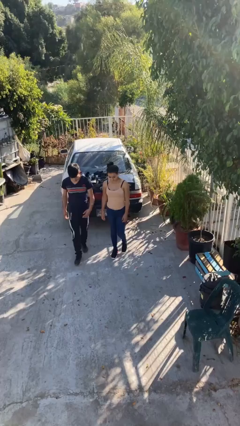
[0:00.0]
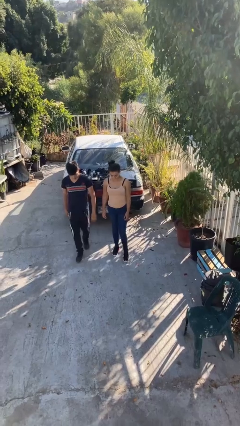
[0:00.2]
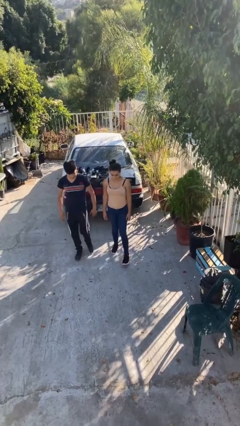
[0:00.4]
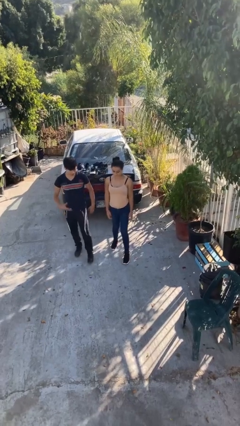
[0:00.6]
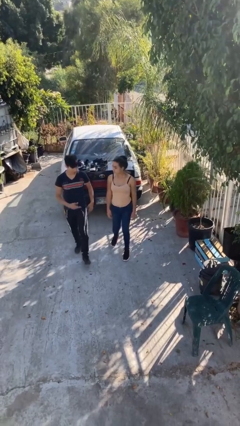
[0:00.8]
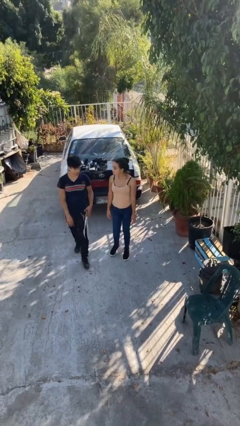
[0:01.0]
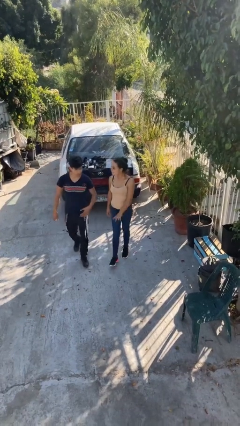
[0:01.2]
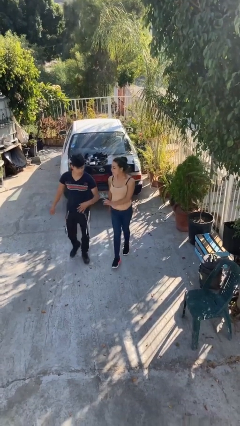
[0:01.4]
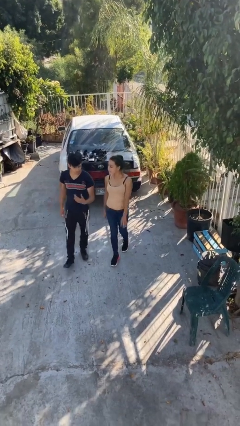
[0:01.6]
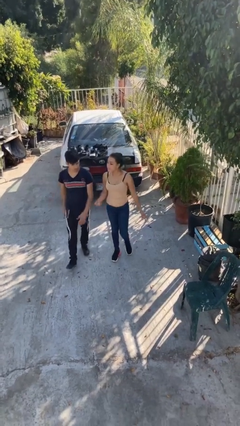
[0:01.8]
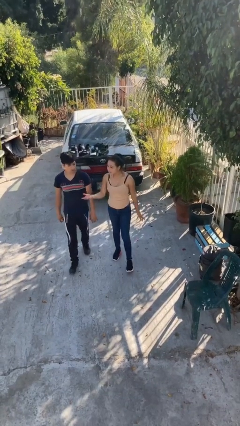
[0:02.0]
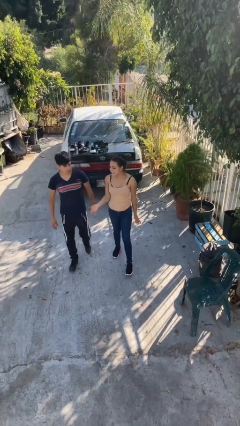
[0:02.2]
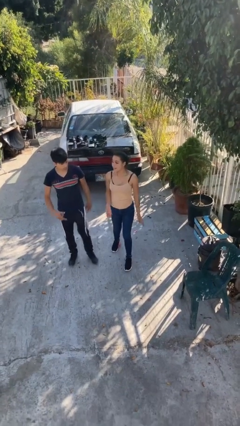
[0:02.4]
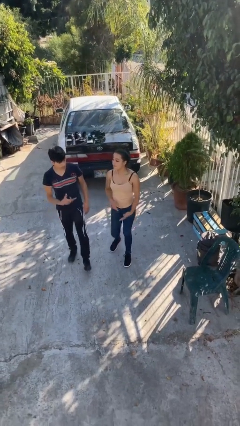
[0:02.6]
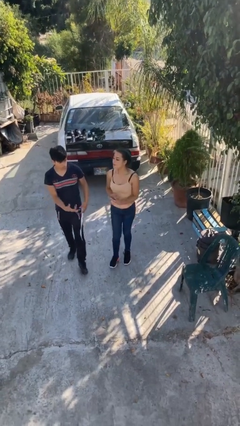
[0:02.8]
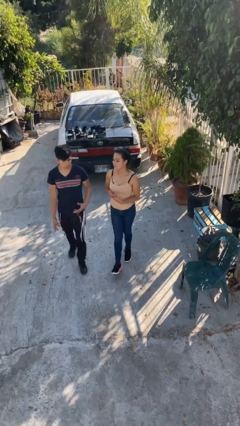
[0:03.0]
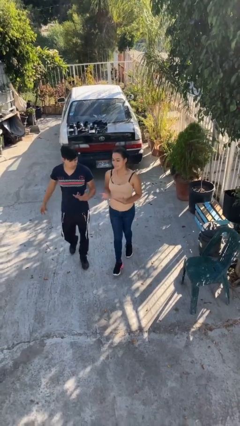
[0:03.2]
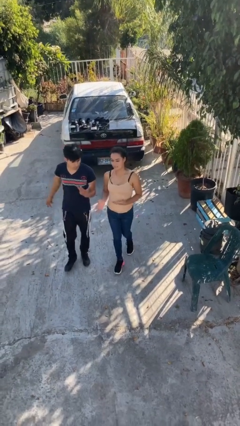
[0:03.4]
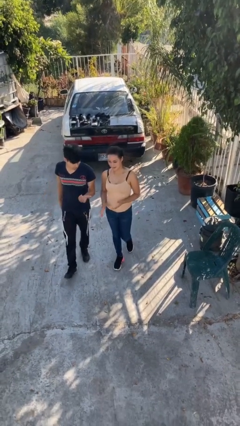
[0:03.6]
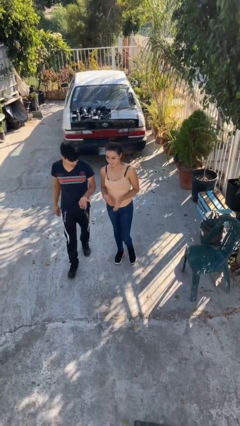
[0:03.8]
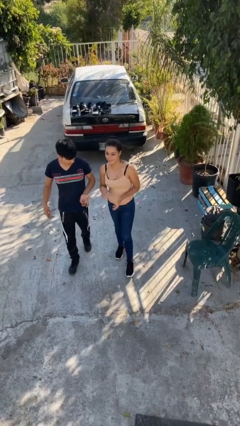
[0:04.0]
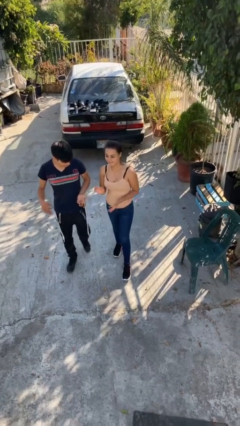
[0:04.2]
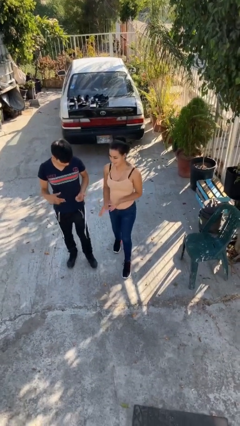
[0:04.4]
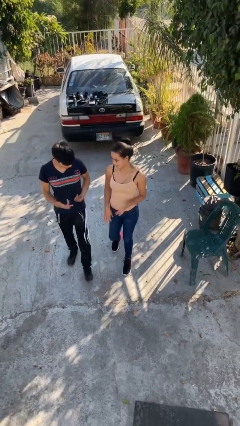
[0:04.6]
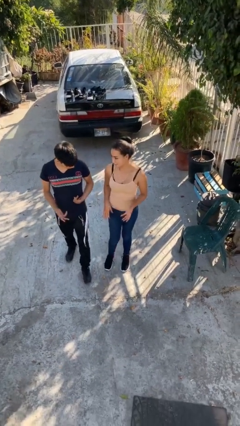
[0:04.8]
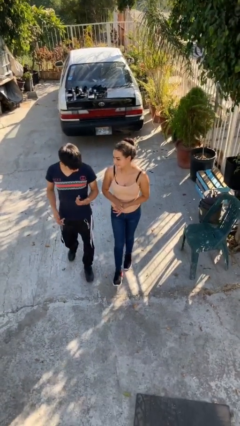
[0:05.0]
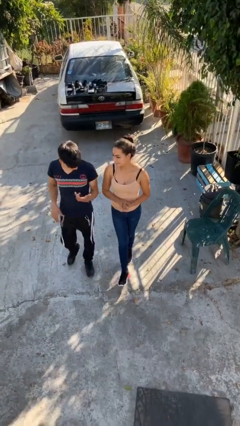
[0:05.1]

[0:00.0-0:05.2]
person talks to person

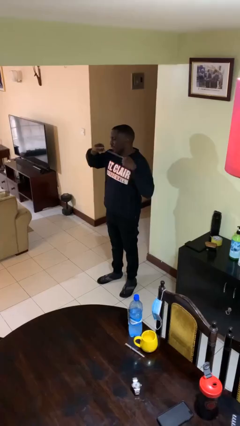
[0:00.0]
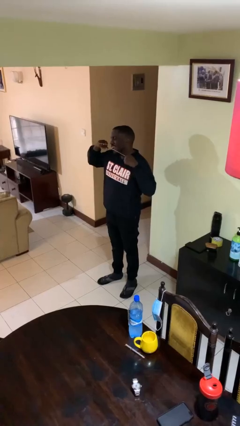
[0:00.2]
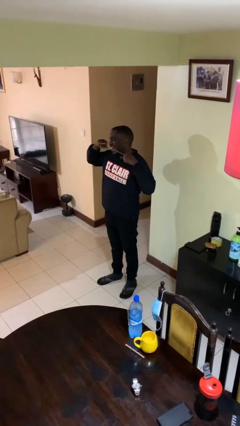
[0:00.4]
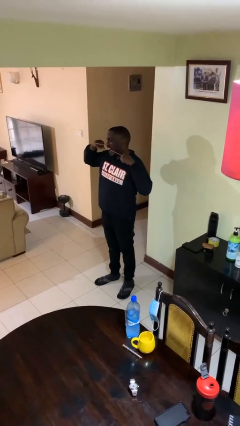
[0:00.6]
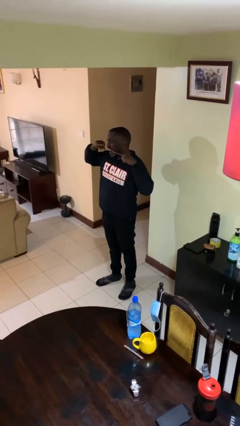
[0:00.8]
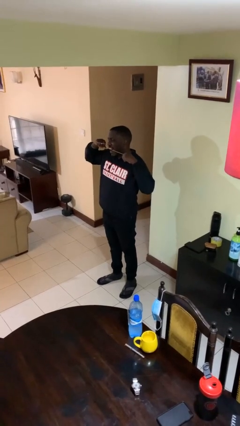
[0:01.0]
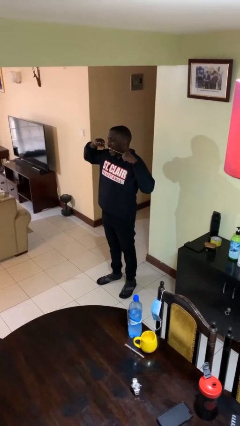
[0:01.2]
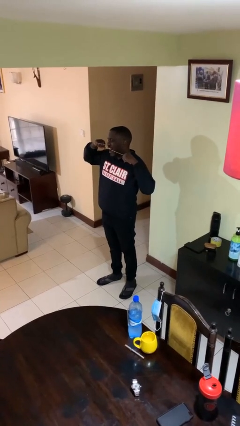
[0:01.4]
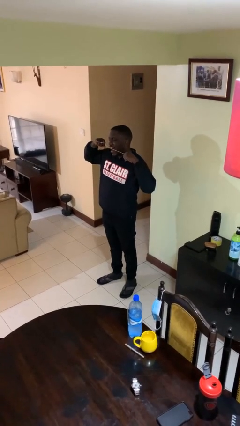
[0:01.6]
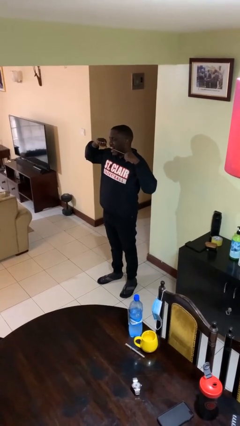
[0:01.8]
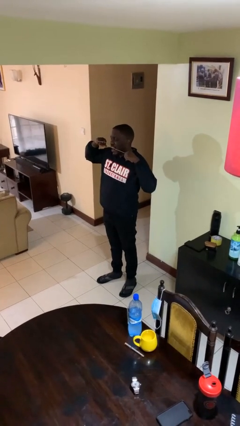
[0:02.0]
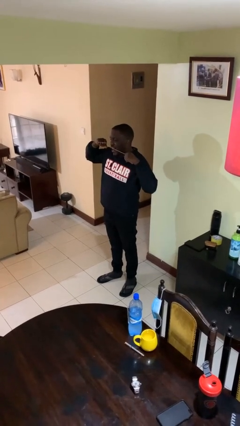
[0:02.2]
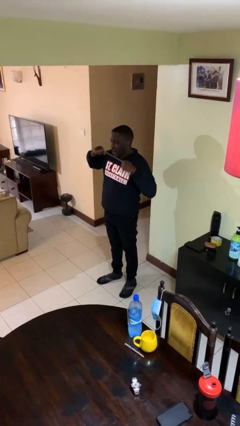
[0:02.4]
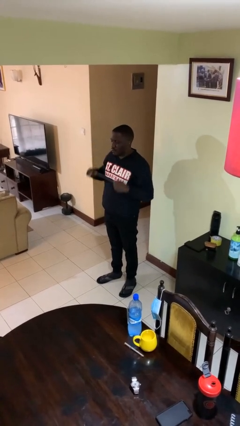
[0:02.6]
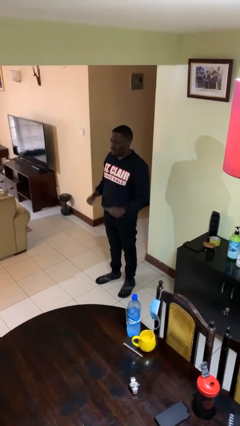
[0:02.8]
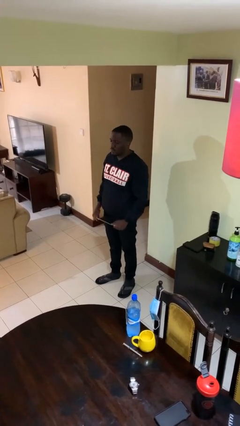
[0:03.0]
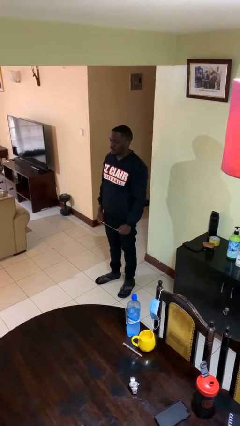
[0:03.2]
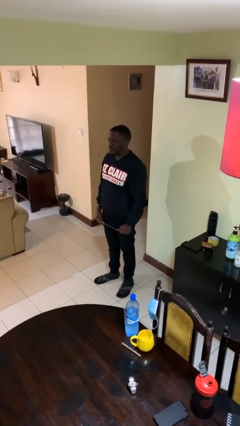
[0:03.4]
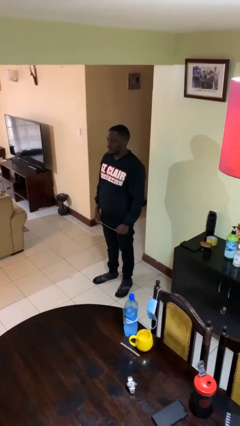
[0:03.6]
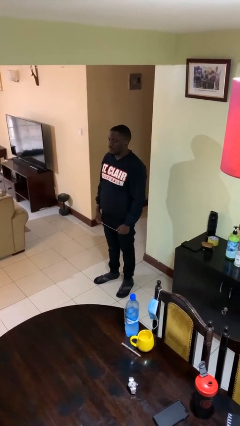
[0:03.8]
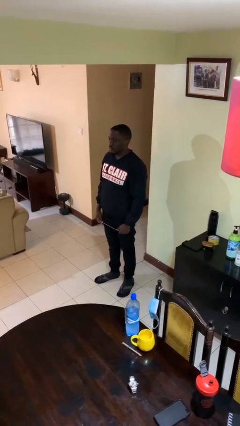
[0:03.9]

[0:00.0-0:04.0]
person flosses

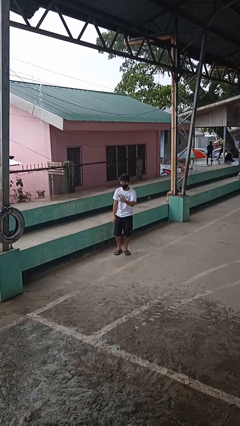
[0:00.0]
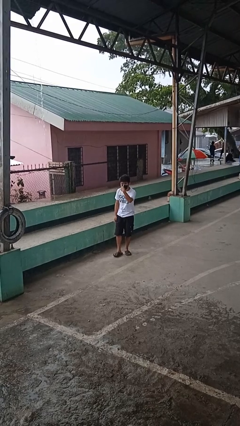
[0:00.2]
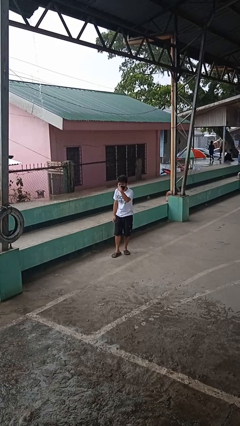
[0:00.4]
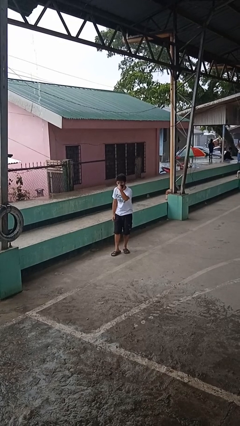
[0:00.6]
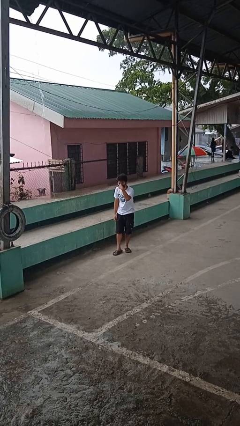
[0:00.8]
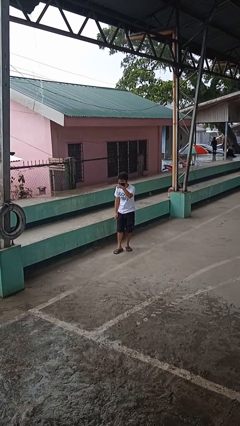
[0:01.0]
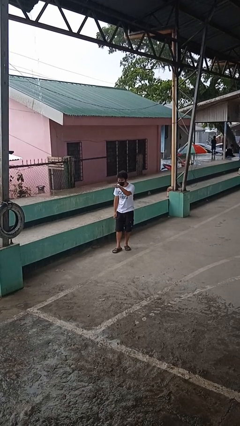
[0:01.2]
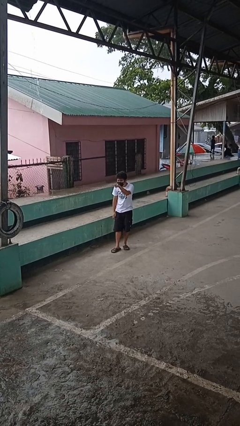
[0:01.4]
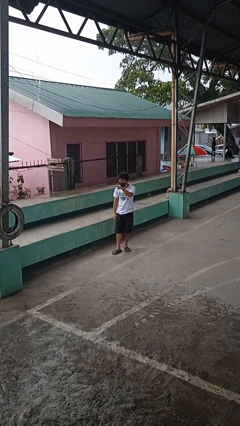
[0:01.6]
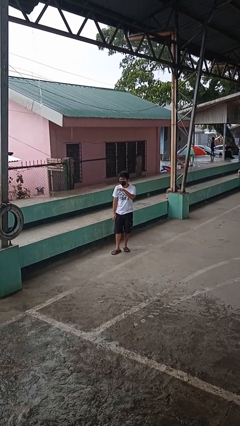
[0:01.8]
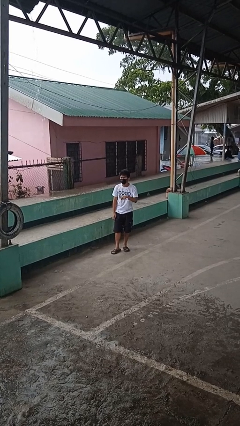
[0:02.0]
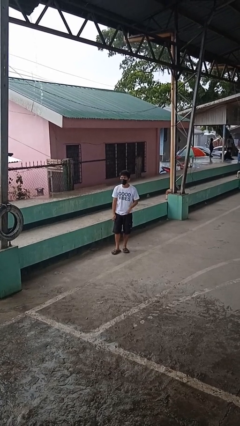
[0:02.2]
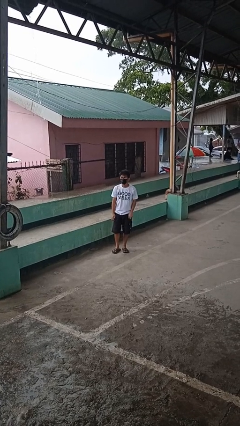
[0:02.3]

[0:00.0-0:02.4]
person gestures watch closely

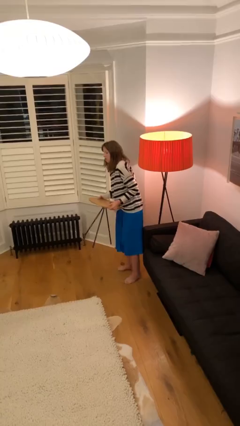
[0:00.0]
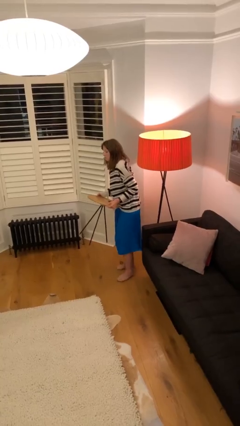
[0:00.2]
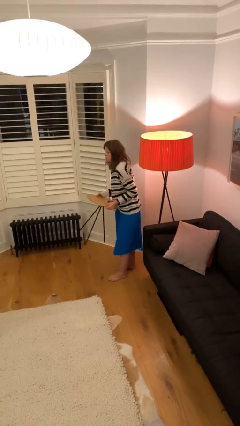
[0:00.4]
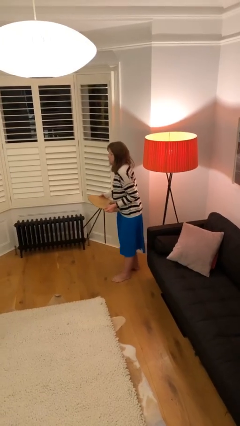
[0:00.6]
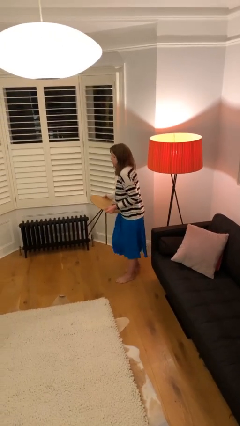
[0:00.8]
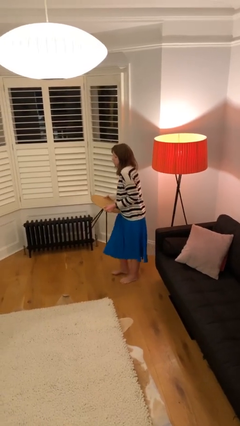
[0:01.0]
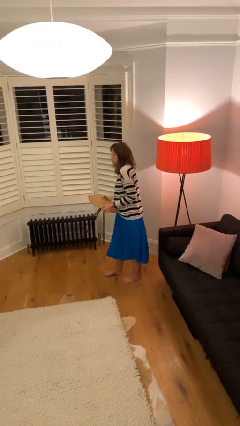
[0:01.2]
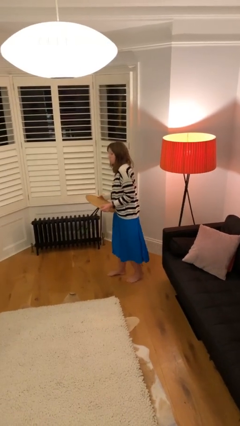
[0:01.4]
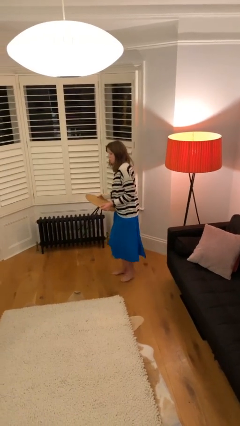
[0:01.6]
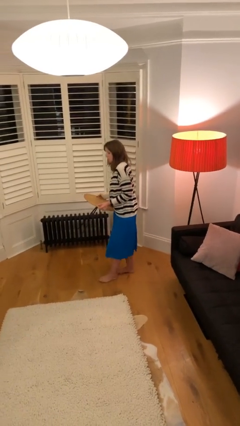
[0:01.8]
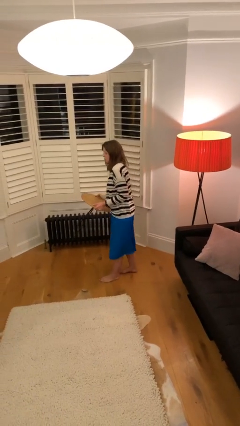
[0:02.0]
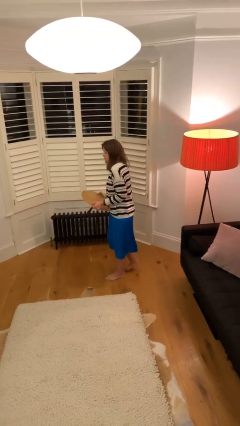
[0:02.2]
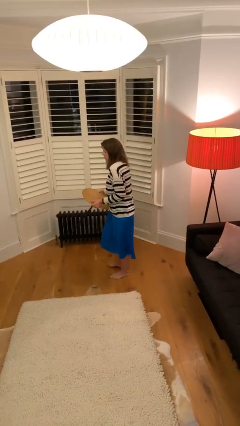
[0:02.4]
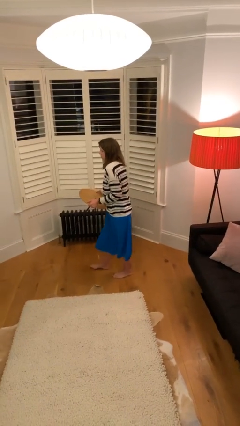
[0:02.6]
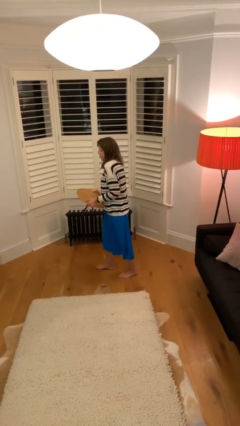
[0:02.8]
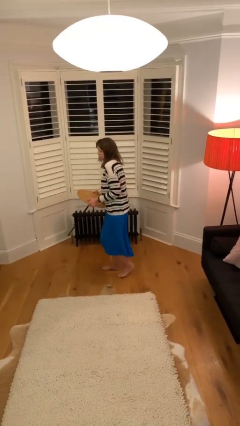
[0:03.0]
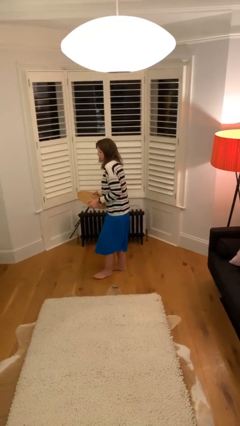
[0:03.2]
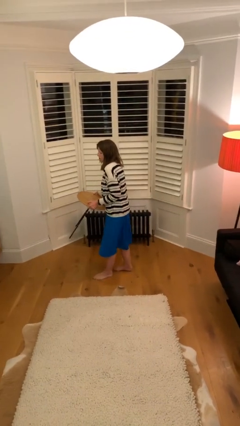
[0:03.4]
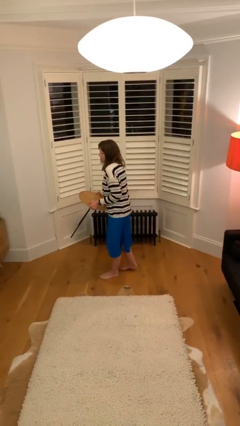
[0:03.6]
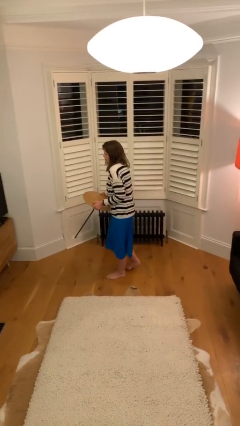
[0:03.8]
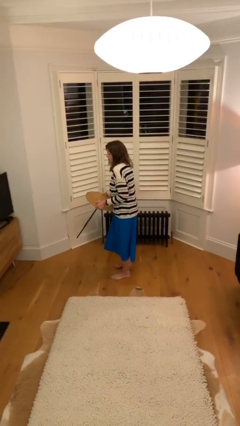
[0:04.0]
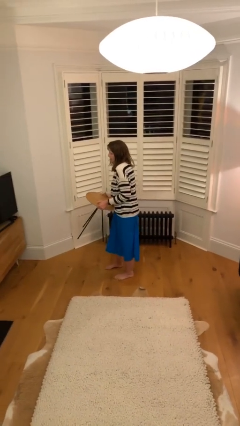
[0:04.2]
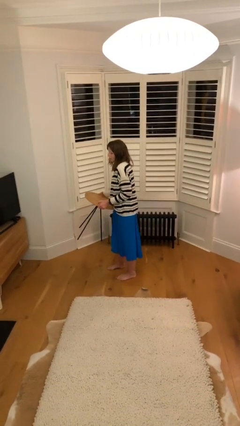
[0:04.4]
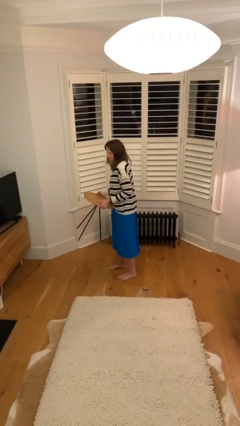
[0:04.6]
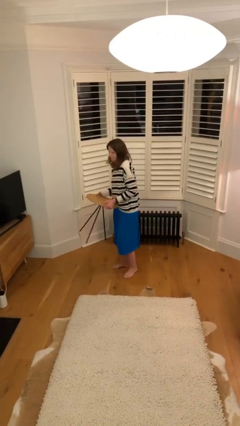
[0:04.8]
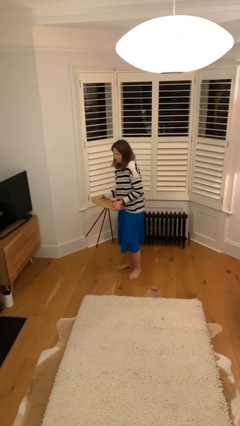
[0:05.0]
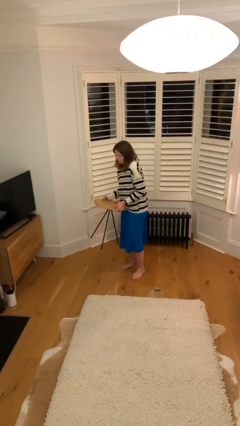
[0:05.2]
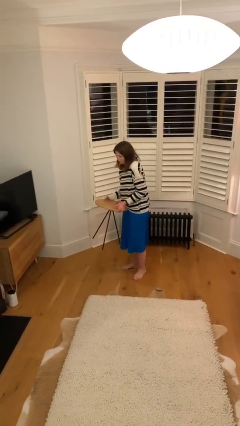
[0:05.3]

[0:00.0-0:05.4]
person carries heavy object

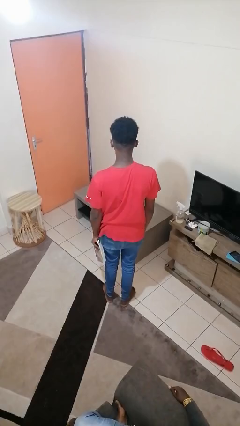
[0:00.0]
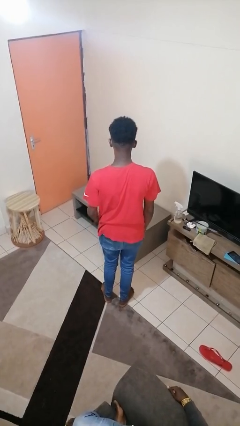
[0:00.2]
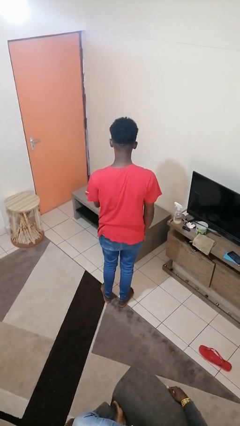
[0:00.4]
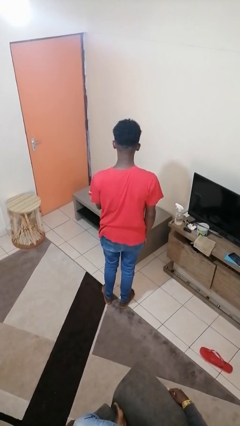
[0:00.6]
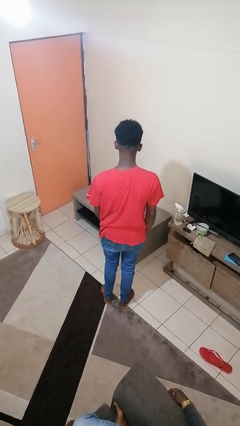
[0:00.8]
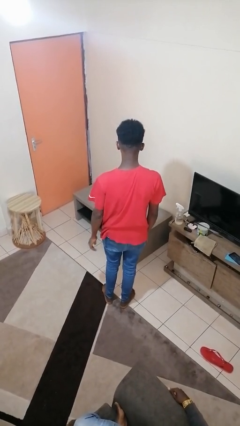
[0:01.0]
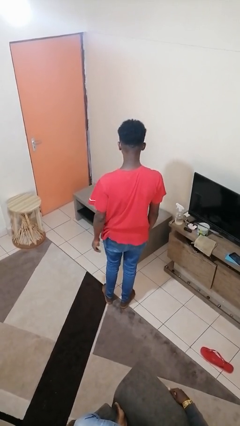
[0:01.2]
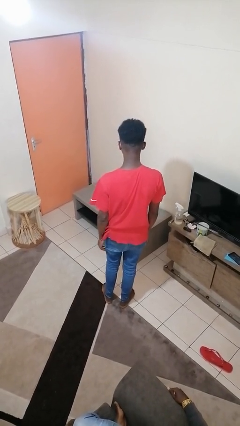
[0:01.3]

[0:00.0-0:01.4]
person throws object on table
